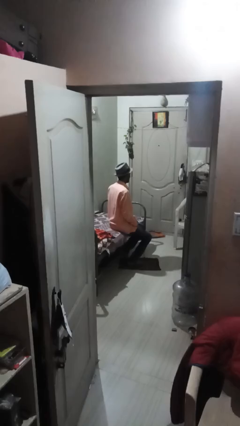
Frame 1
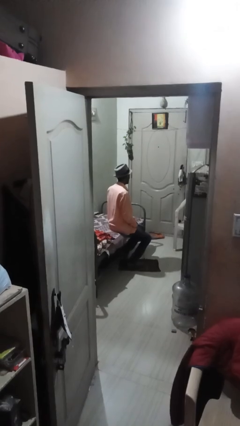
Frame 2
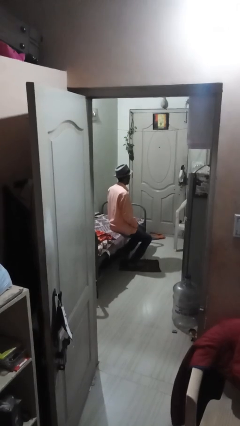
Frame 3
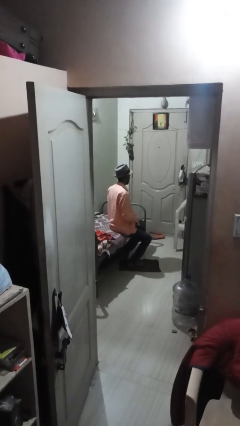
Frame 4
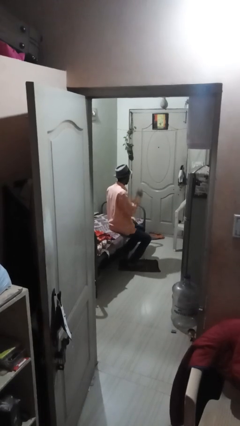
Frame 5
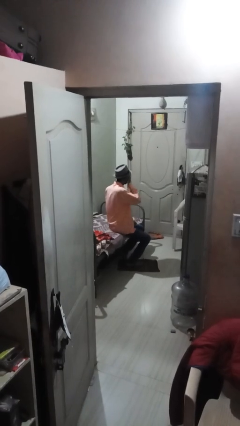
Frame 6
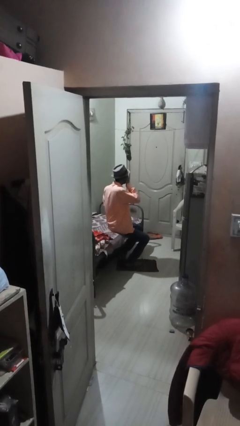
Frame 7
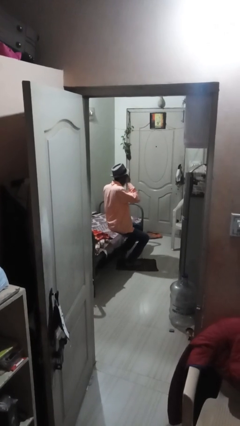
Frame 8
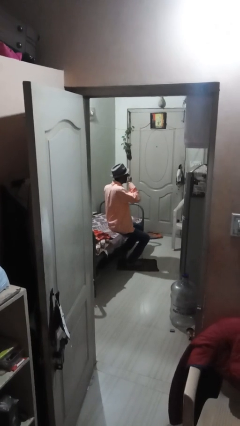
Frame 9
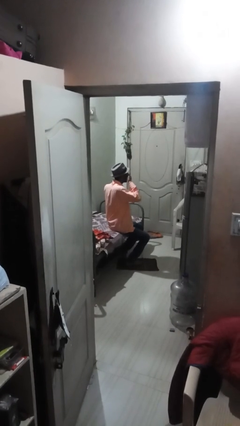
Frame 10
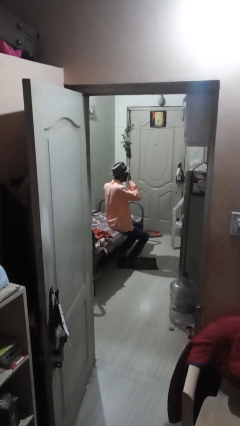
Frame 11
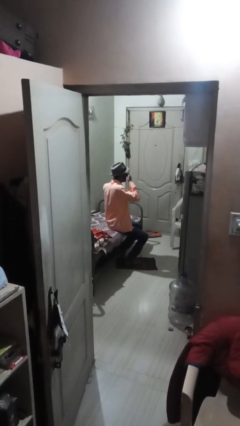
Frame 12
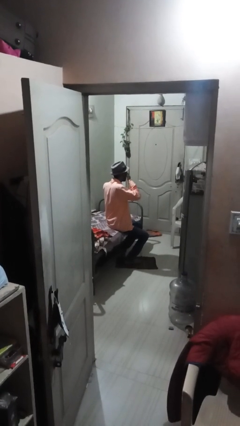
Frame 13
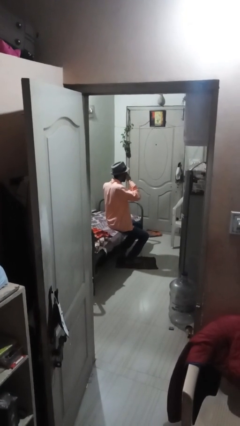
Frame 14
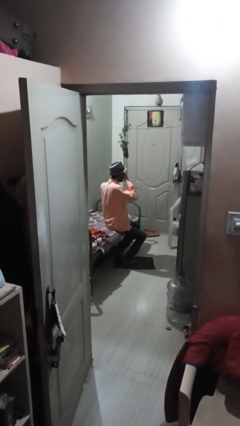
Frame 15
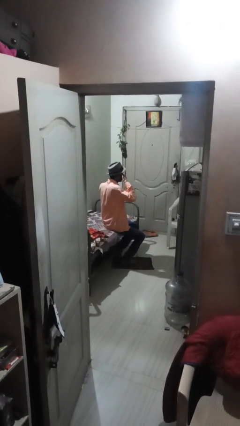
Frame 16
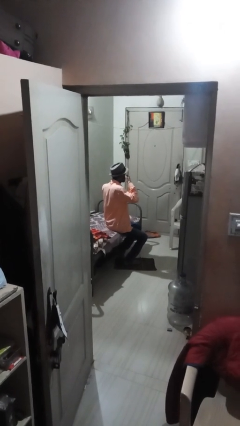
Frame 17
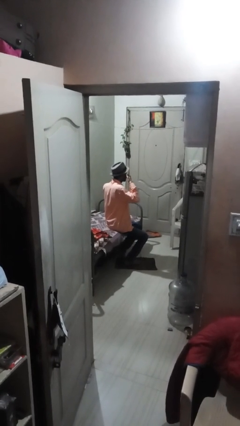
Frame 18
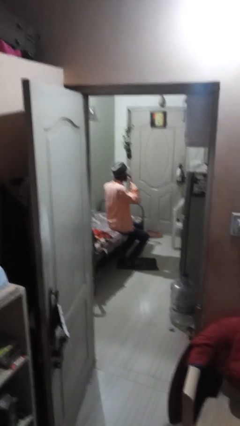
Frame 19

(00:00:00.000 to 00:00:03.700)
person covers face with hands

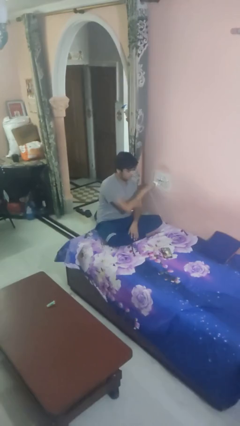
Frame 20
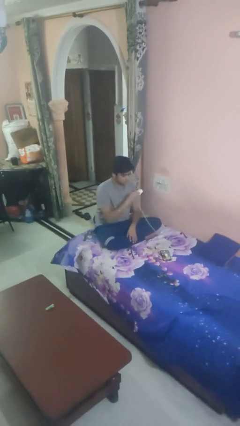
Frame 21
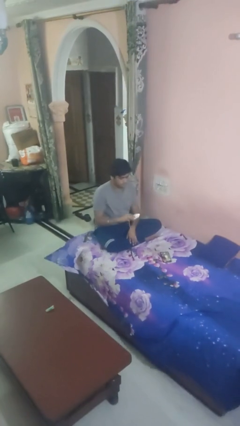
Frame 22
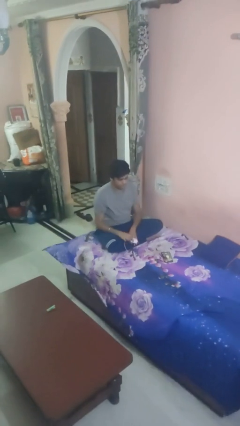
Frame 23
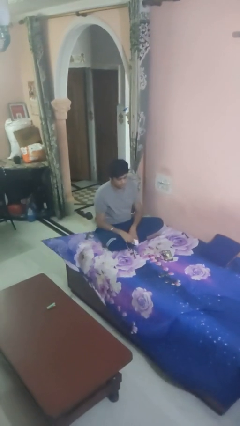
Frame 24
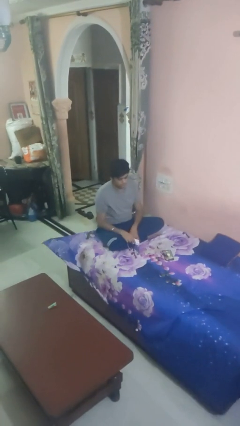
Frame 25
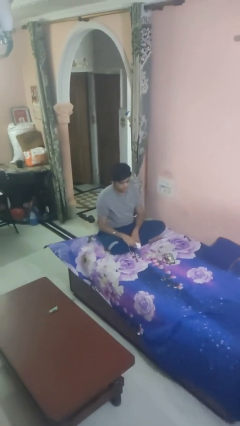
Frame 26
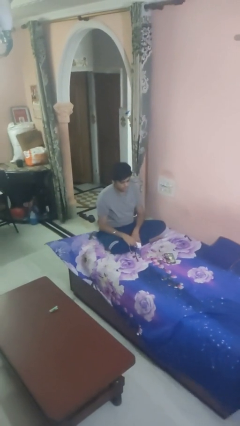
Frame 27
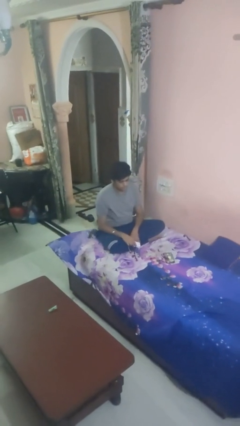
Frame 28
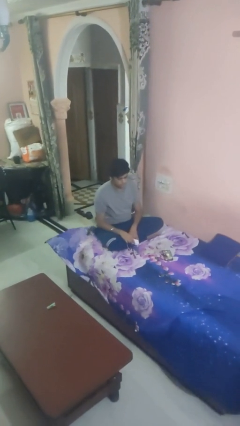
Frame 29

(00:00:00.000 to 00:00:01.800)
person unplugs from electrical socket

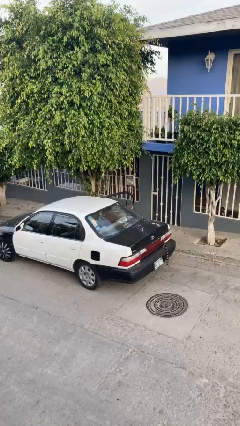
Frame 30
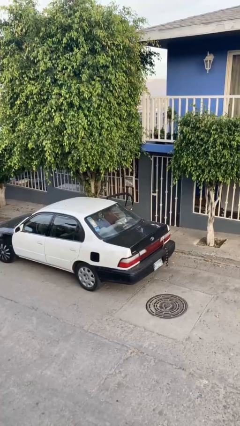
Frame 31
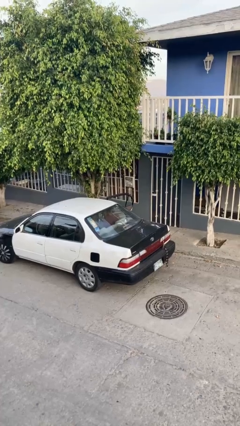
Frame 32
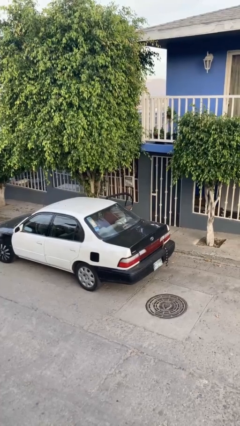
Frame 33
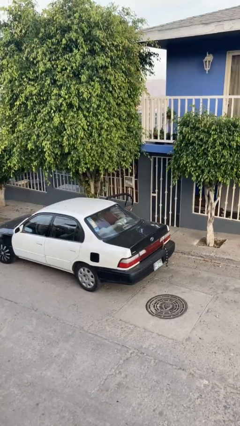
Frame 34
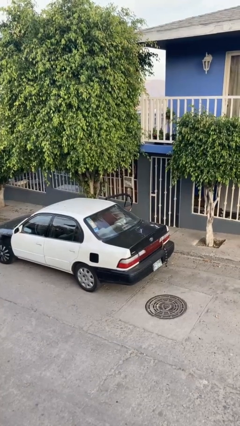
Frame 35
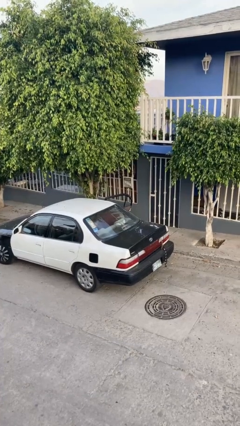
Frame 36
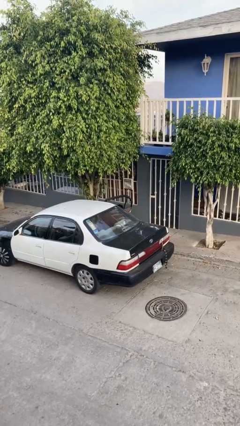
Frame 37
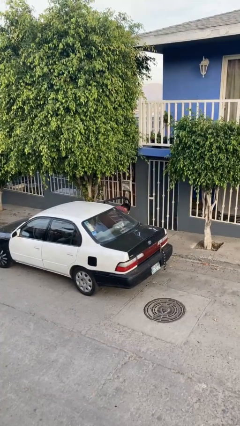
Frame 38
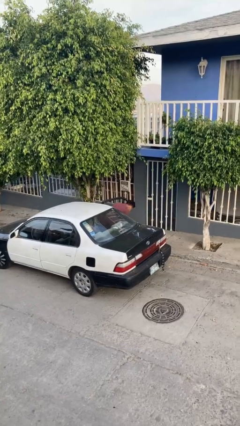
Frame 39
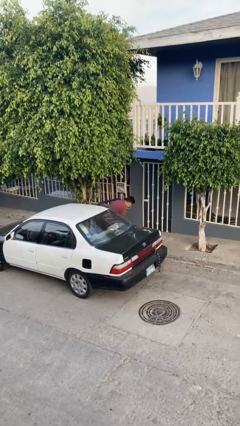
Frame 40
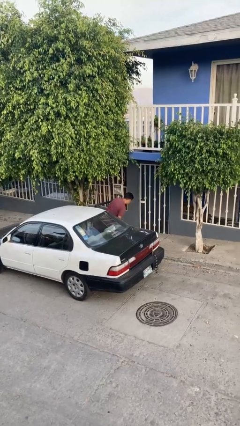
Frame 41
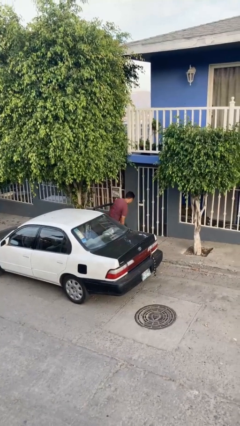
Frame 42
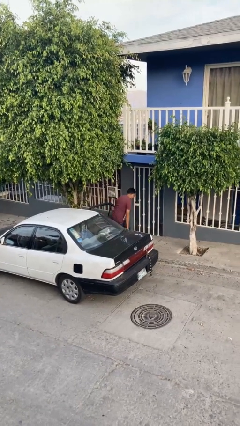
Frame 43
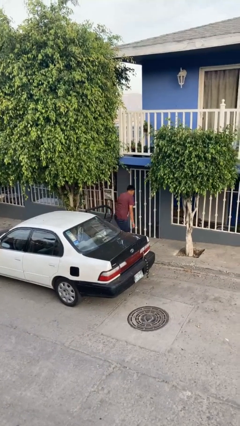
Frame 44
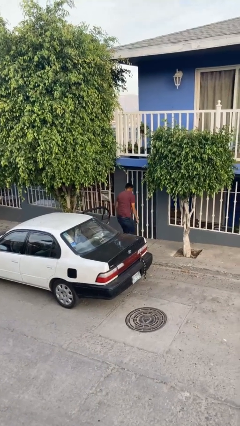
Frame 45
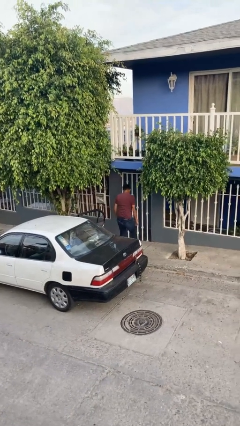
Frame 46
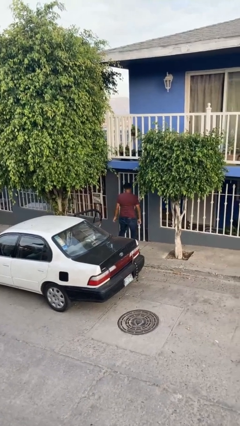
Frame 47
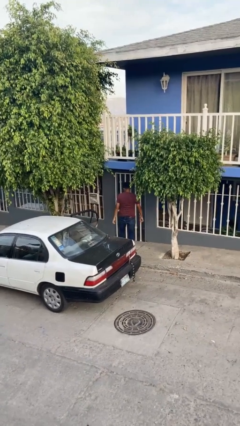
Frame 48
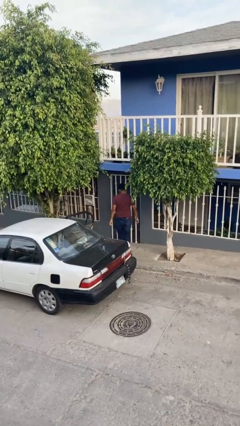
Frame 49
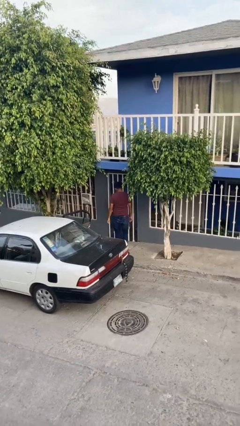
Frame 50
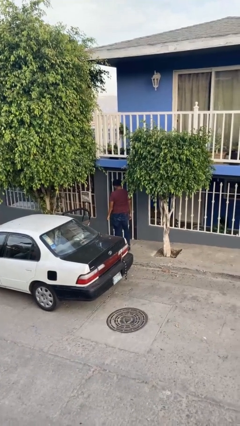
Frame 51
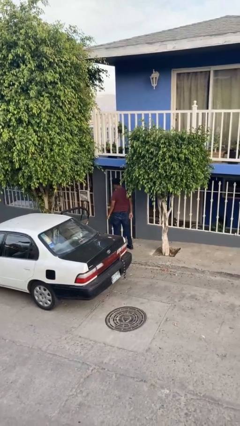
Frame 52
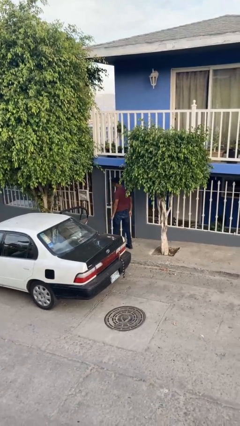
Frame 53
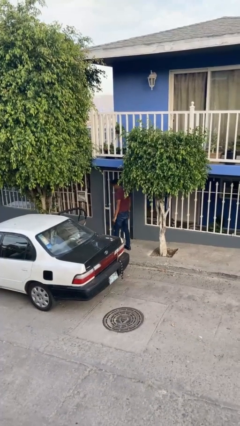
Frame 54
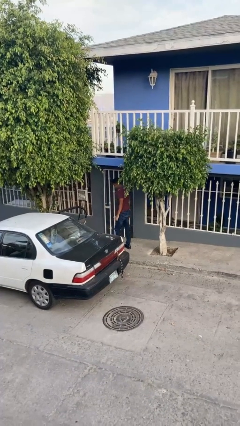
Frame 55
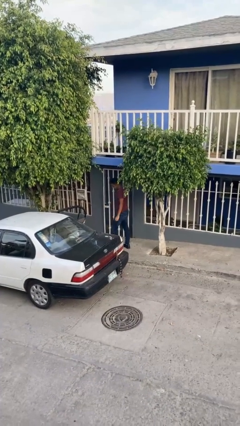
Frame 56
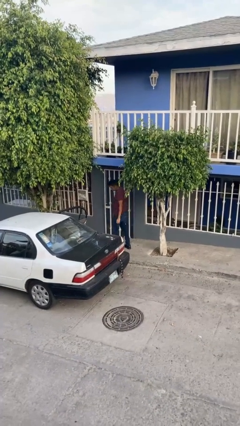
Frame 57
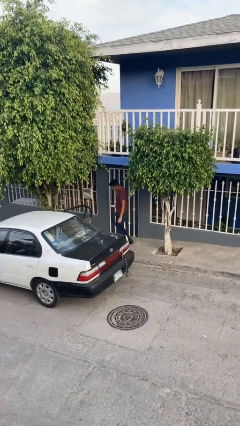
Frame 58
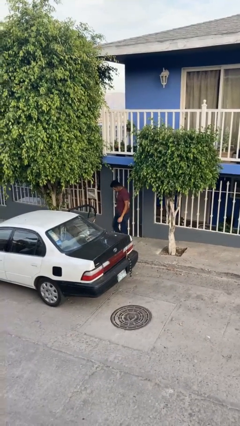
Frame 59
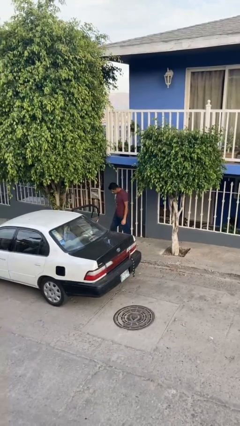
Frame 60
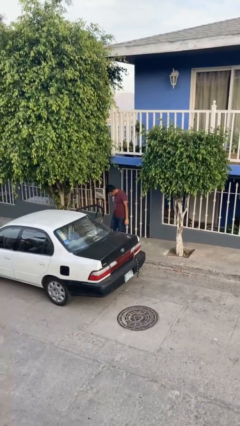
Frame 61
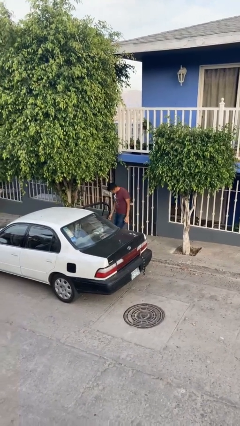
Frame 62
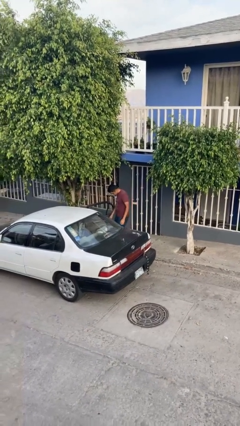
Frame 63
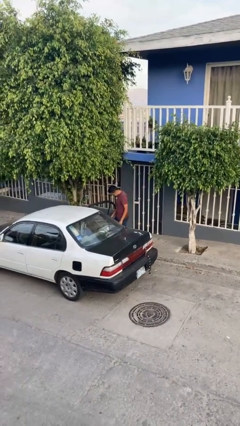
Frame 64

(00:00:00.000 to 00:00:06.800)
person exits car

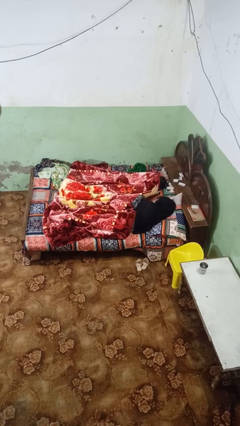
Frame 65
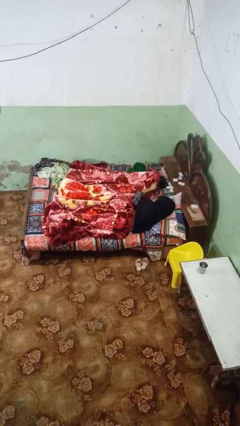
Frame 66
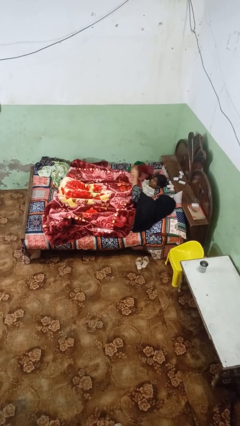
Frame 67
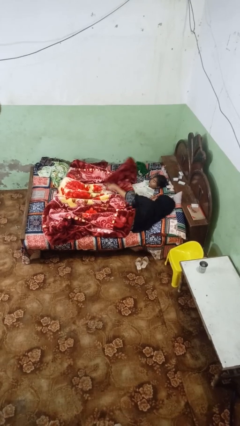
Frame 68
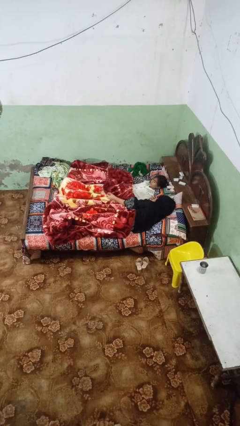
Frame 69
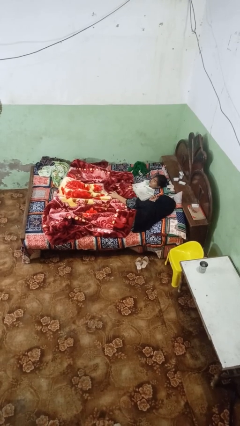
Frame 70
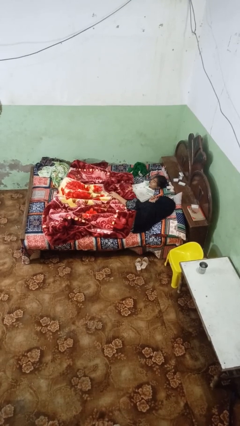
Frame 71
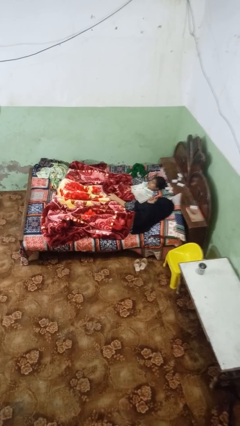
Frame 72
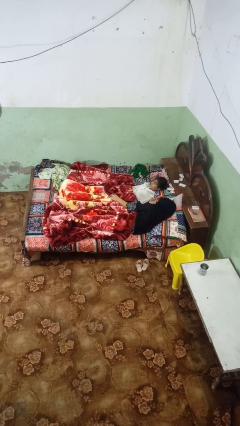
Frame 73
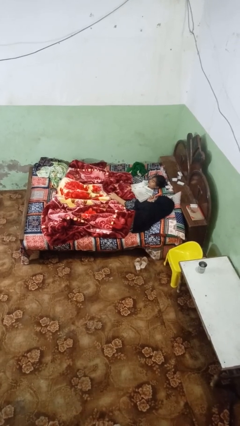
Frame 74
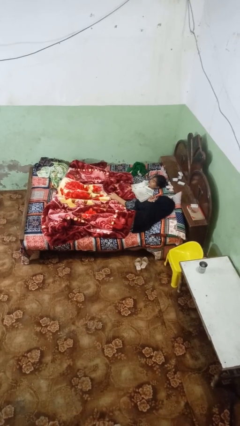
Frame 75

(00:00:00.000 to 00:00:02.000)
person uncovers friend with blanket

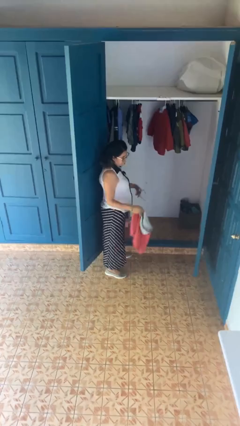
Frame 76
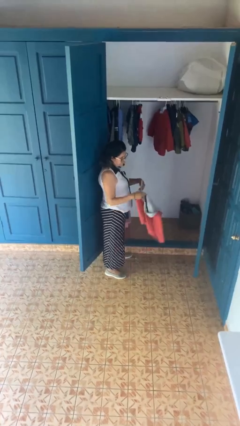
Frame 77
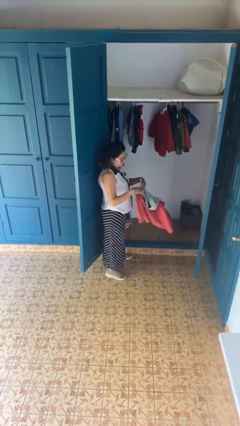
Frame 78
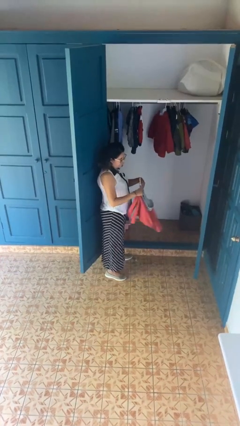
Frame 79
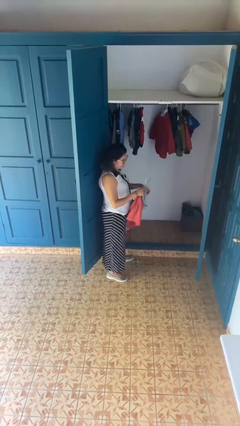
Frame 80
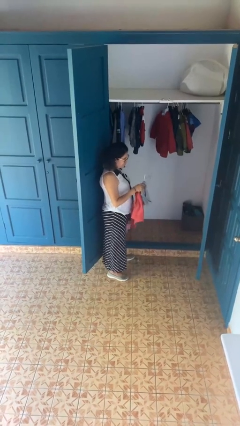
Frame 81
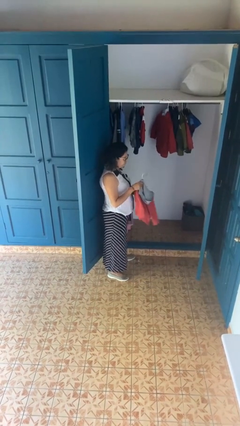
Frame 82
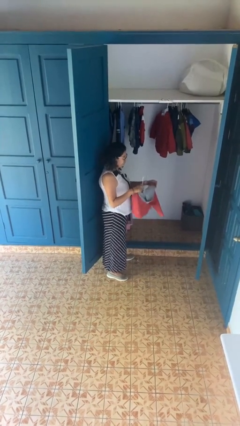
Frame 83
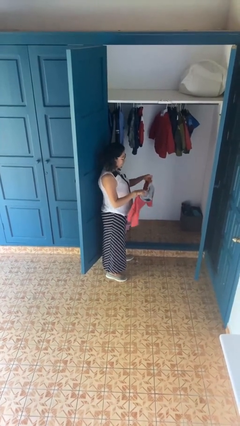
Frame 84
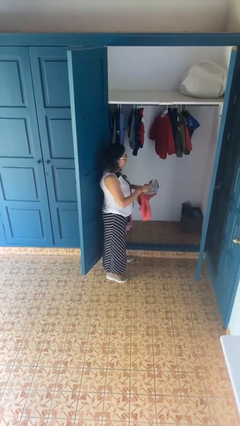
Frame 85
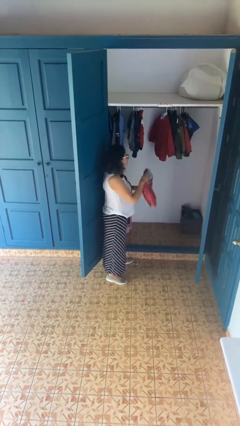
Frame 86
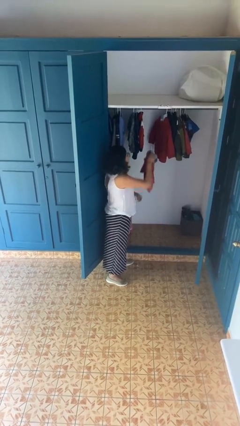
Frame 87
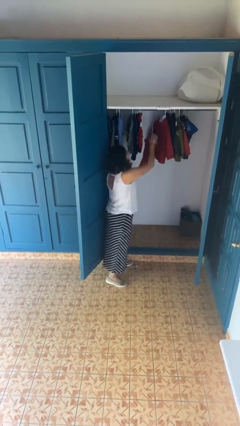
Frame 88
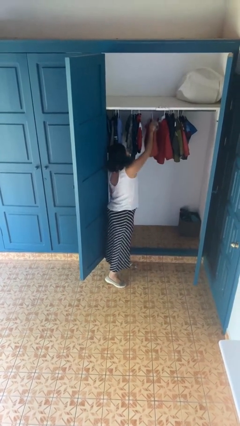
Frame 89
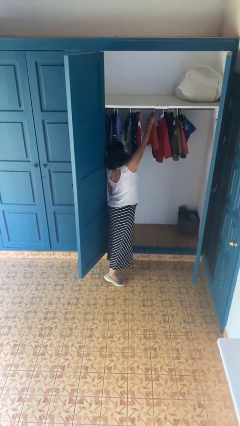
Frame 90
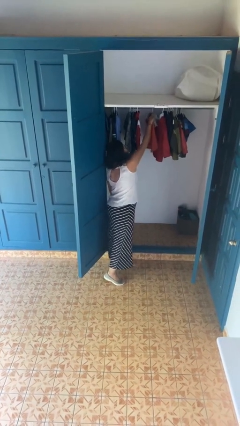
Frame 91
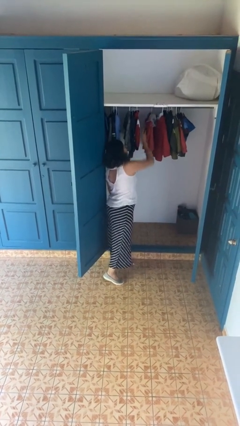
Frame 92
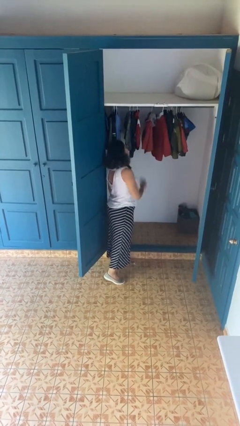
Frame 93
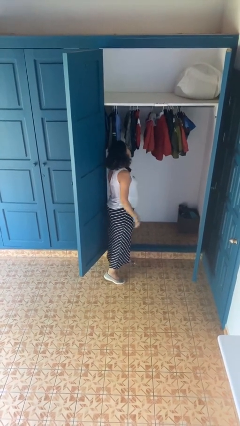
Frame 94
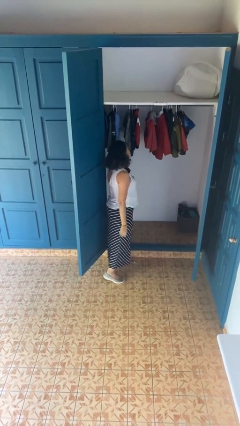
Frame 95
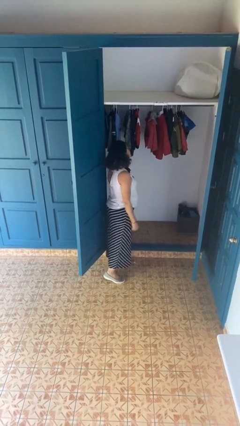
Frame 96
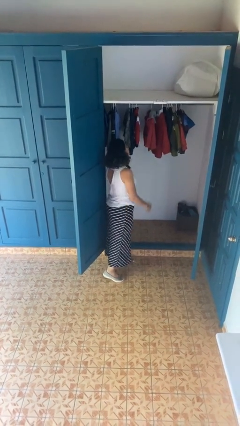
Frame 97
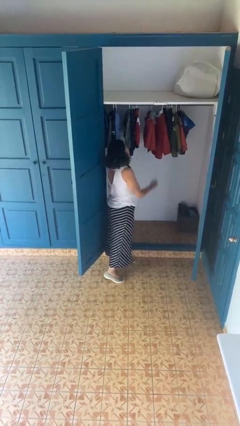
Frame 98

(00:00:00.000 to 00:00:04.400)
person puts clothes into closet
